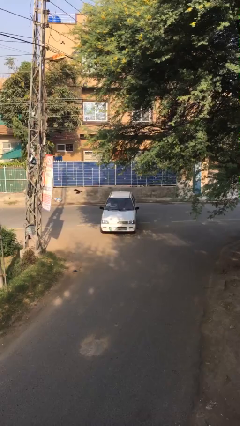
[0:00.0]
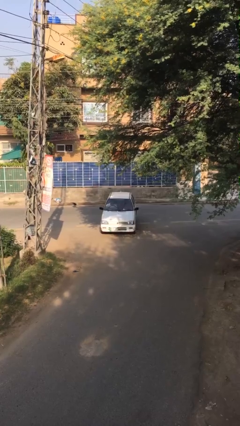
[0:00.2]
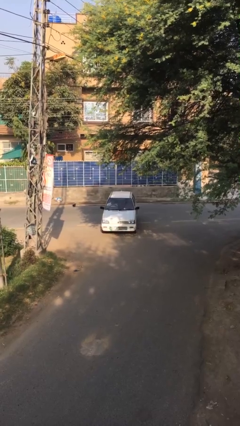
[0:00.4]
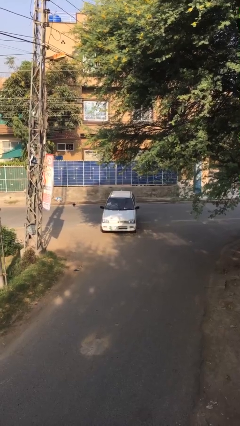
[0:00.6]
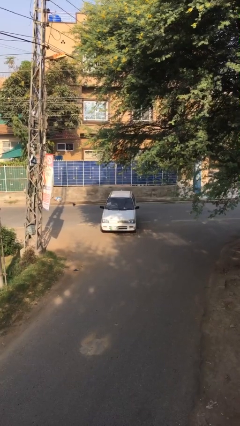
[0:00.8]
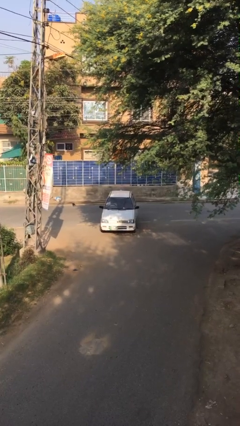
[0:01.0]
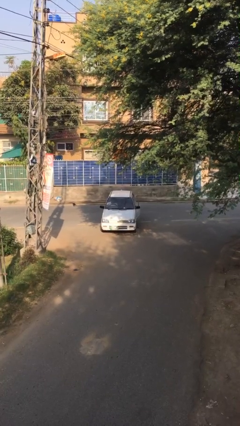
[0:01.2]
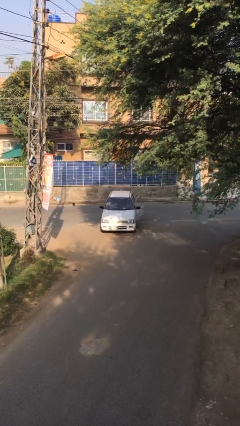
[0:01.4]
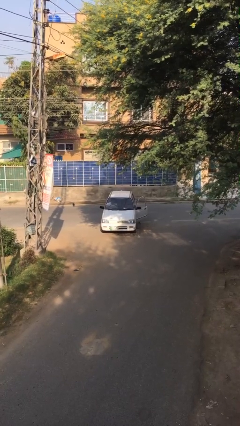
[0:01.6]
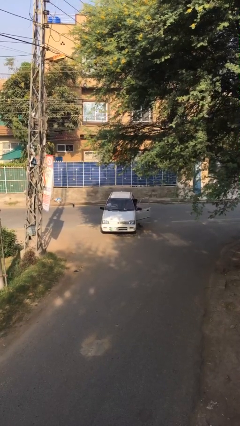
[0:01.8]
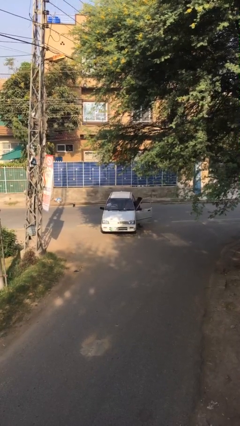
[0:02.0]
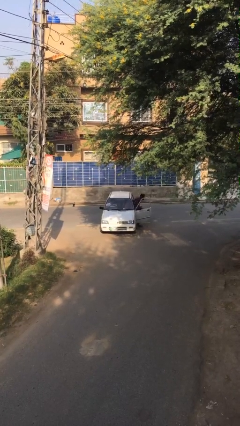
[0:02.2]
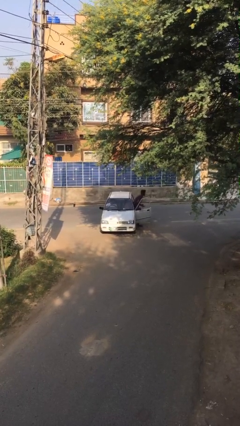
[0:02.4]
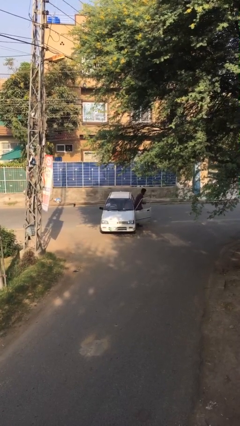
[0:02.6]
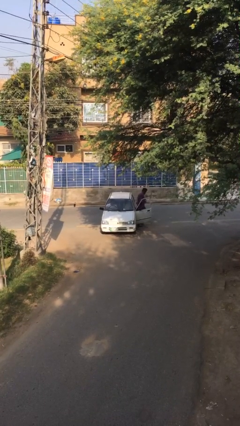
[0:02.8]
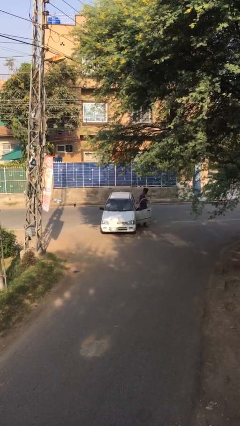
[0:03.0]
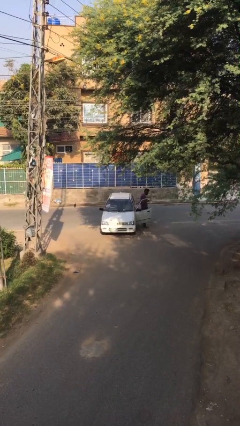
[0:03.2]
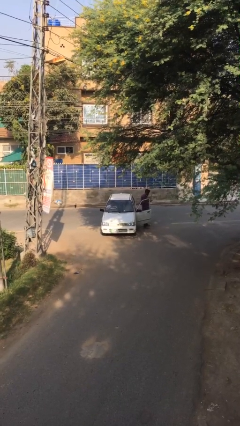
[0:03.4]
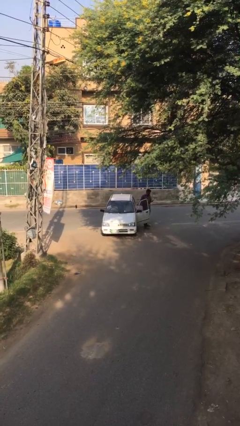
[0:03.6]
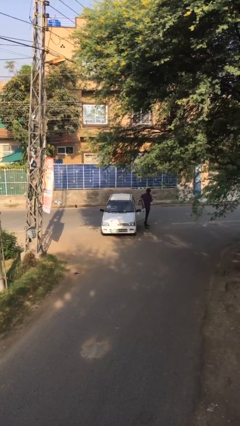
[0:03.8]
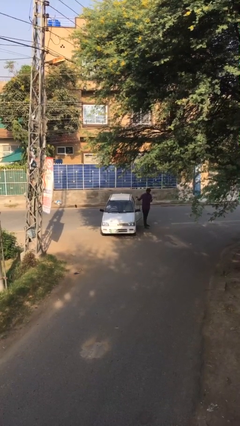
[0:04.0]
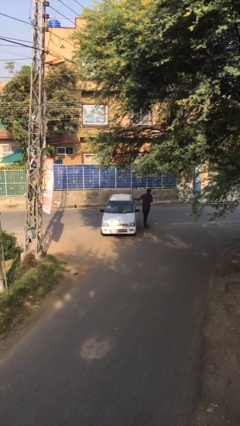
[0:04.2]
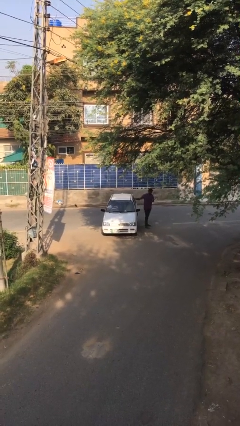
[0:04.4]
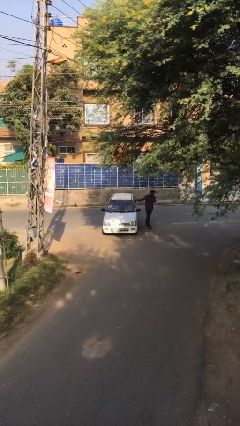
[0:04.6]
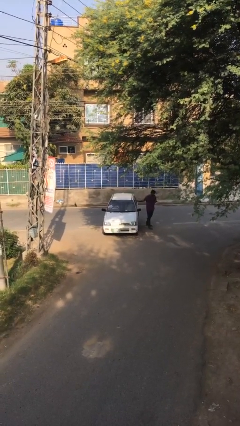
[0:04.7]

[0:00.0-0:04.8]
car drops off person

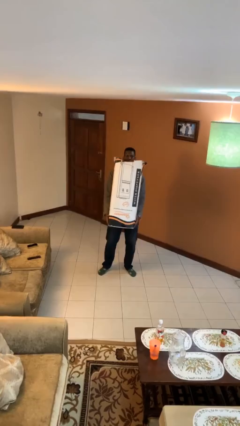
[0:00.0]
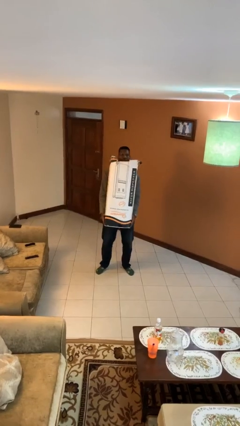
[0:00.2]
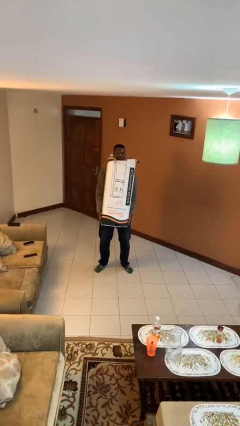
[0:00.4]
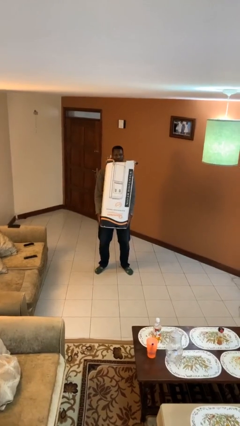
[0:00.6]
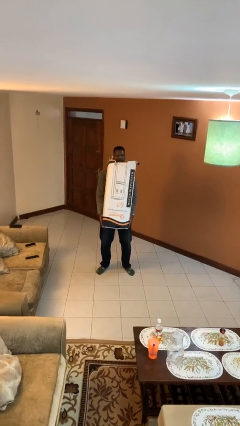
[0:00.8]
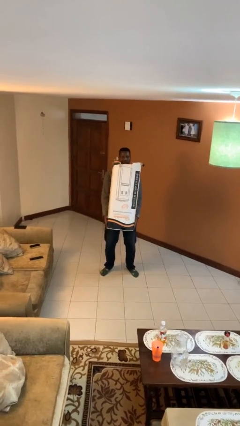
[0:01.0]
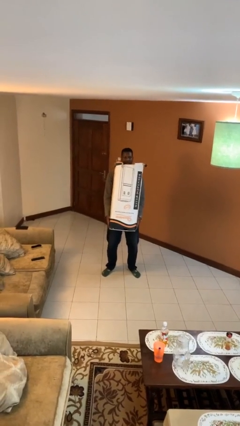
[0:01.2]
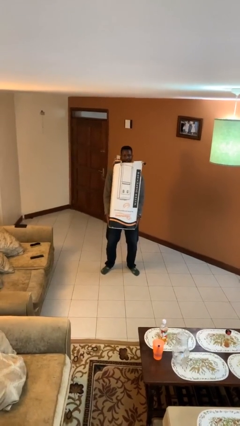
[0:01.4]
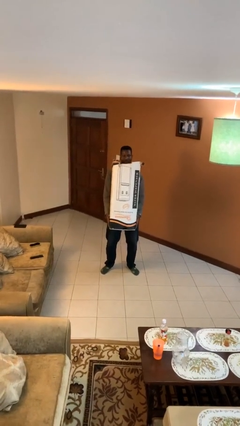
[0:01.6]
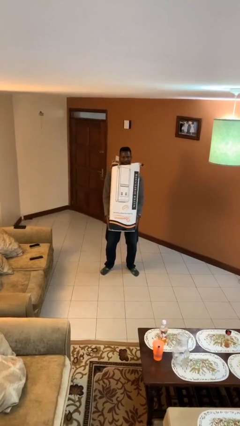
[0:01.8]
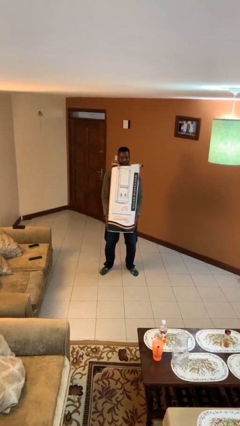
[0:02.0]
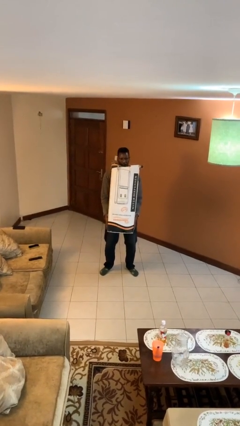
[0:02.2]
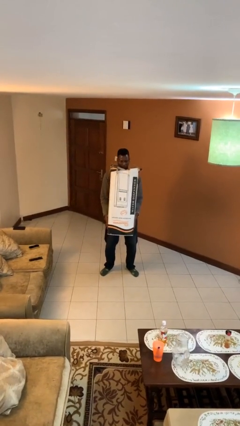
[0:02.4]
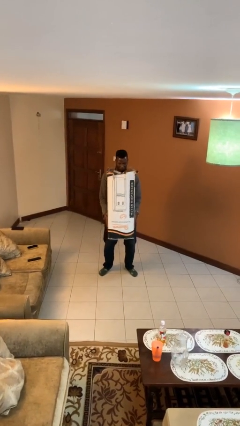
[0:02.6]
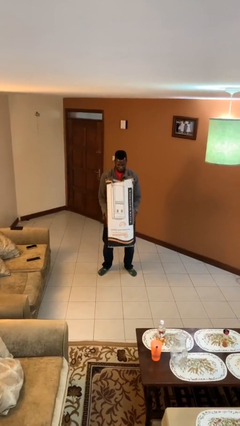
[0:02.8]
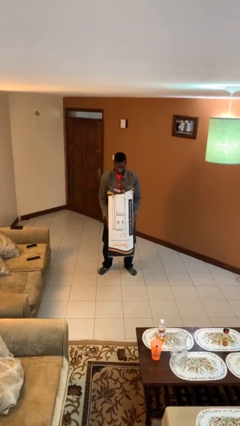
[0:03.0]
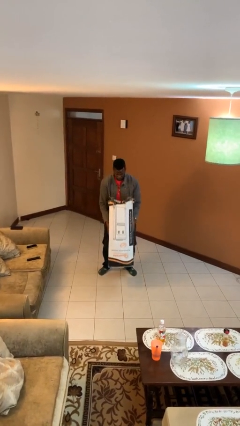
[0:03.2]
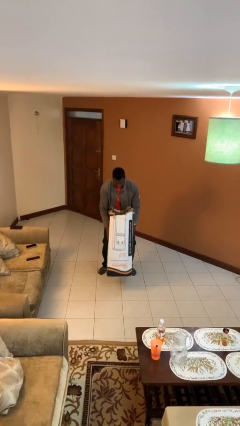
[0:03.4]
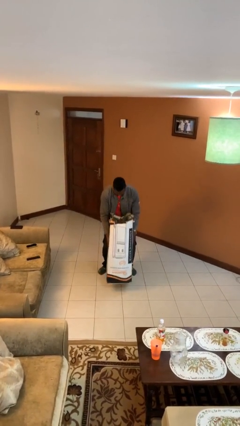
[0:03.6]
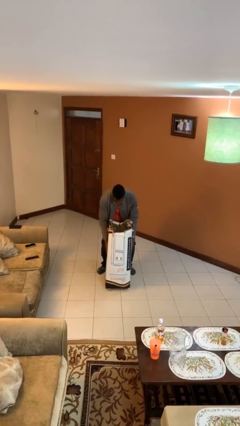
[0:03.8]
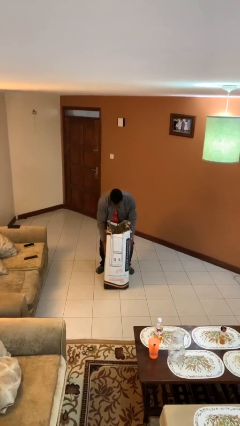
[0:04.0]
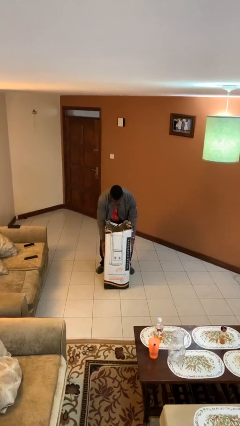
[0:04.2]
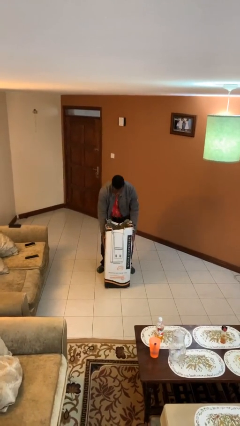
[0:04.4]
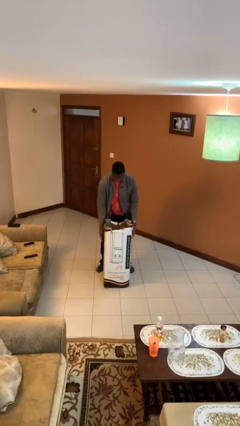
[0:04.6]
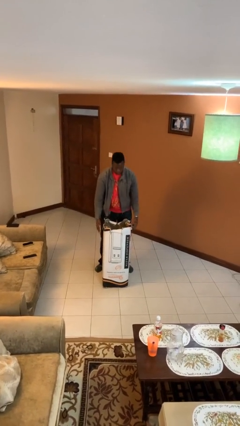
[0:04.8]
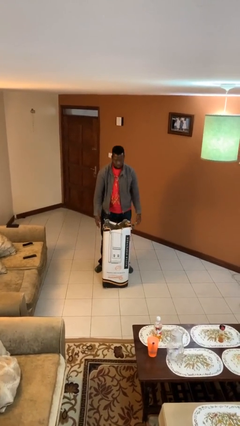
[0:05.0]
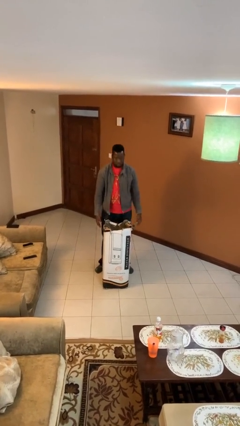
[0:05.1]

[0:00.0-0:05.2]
person puts down object on floor

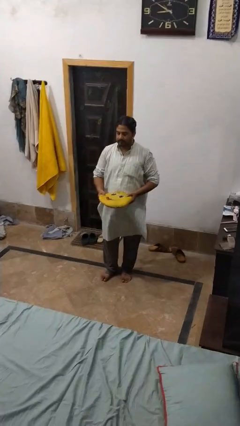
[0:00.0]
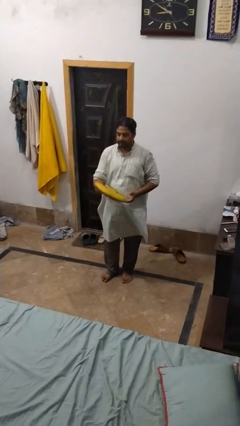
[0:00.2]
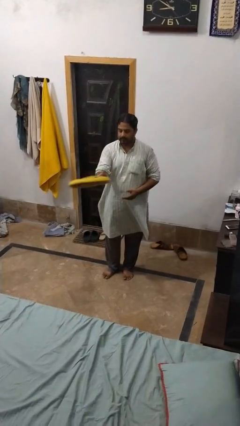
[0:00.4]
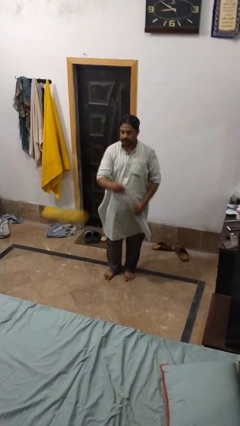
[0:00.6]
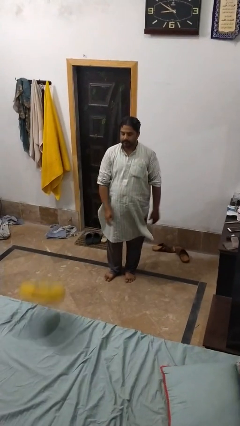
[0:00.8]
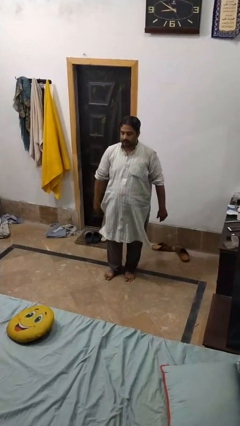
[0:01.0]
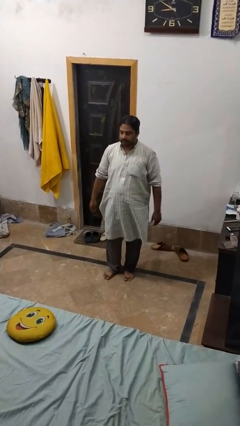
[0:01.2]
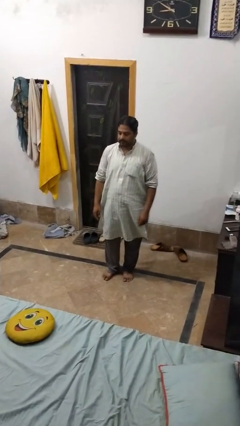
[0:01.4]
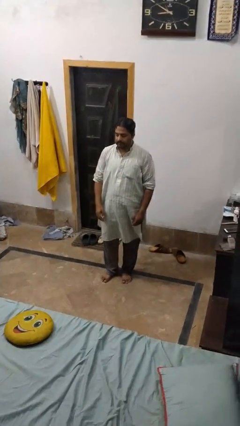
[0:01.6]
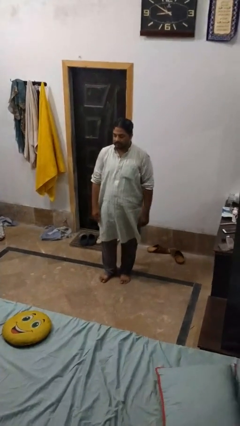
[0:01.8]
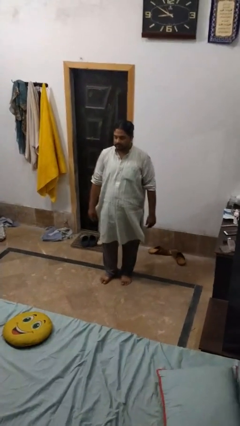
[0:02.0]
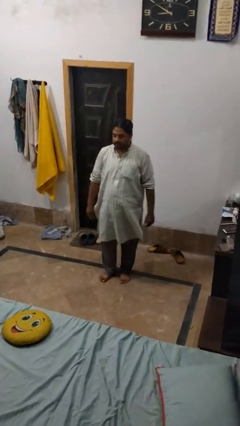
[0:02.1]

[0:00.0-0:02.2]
person throws object on bed

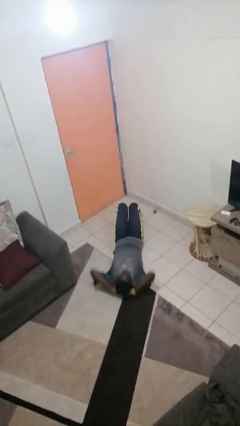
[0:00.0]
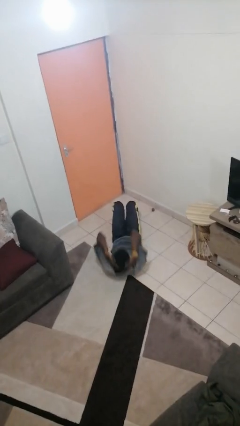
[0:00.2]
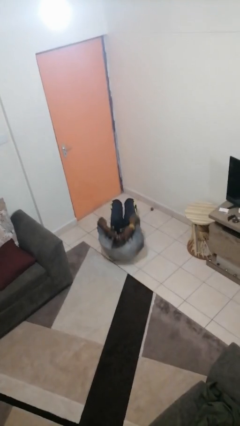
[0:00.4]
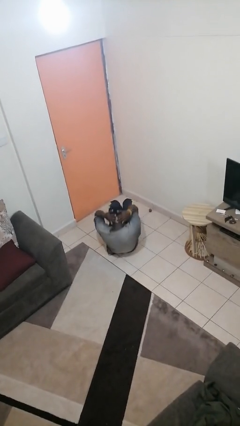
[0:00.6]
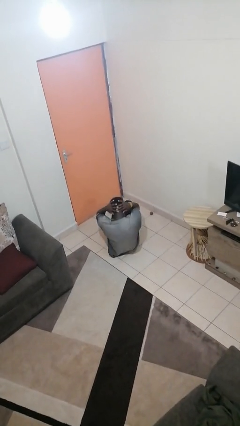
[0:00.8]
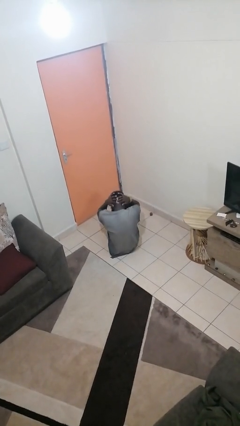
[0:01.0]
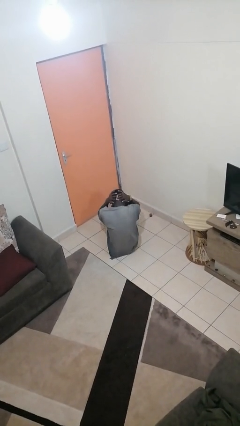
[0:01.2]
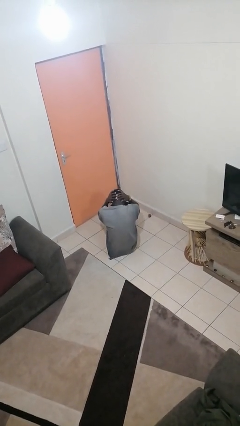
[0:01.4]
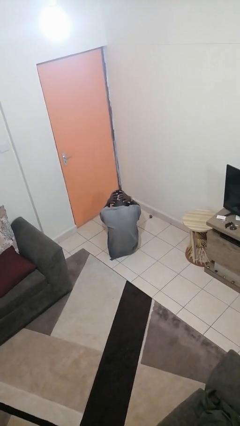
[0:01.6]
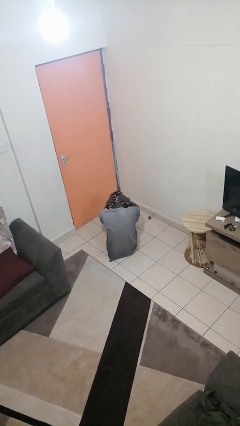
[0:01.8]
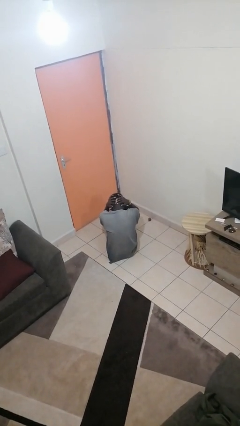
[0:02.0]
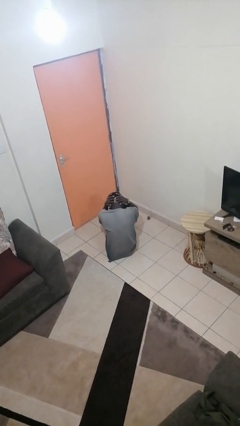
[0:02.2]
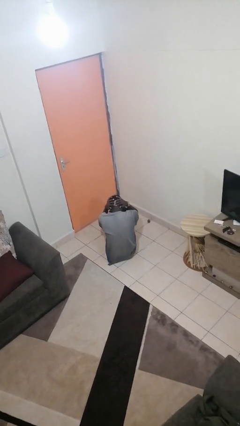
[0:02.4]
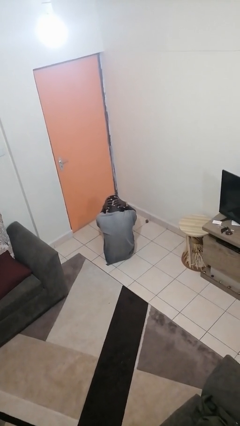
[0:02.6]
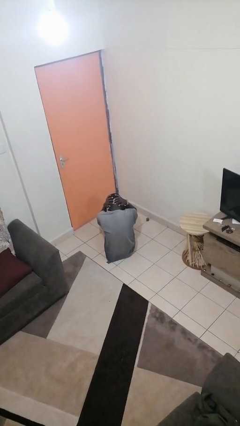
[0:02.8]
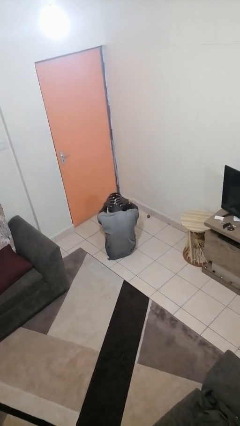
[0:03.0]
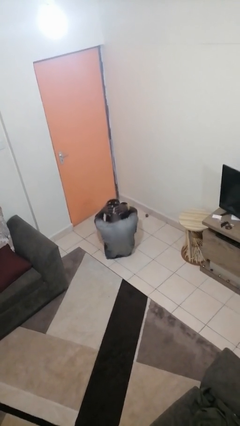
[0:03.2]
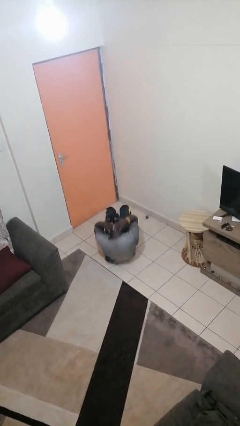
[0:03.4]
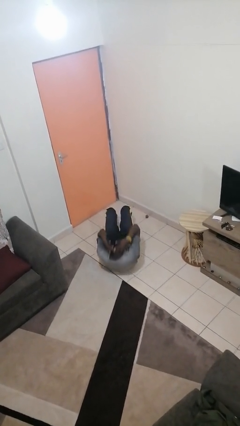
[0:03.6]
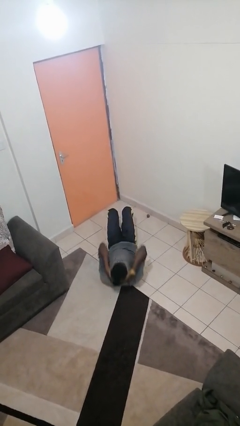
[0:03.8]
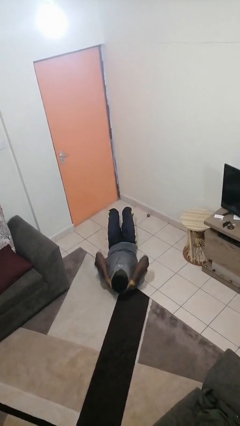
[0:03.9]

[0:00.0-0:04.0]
person exercises with situp

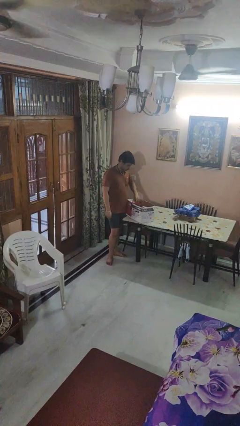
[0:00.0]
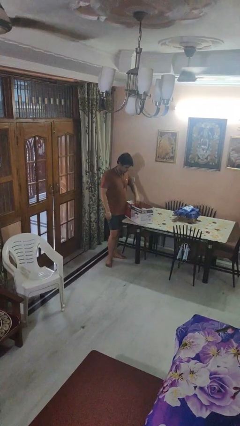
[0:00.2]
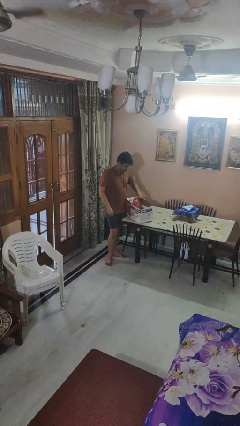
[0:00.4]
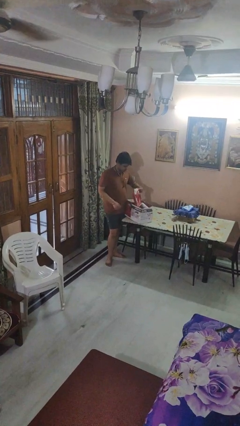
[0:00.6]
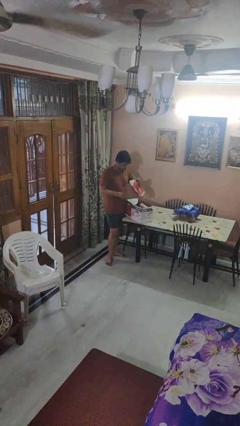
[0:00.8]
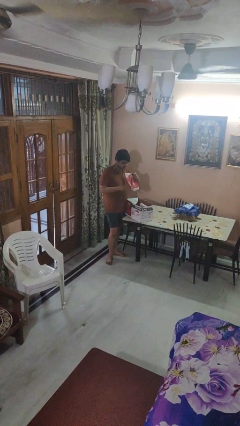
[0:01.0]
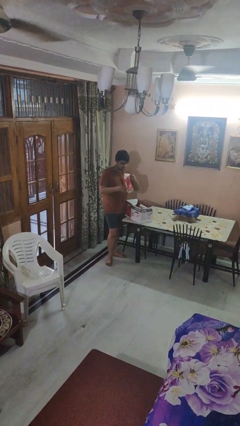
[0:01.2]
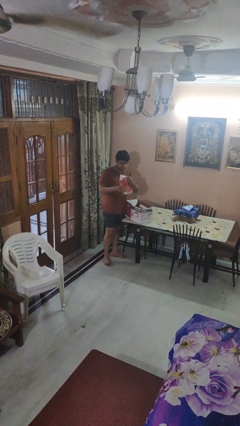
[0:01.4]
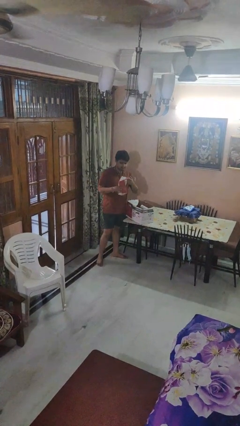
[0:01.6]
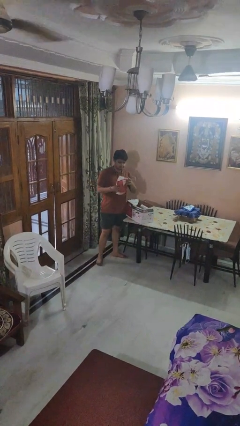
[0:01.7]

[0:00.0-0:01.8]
person takes object from box
